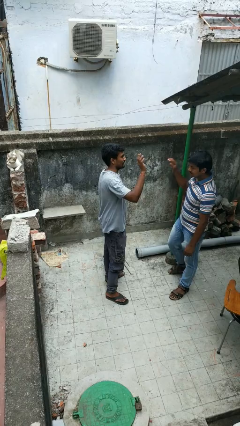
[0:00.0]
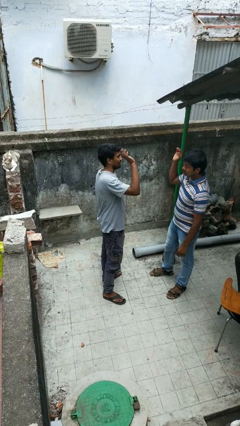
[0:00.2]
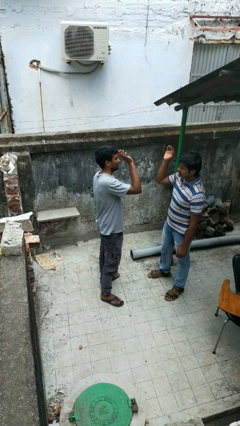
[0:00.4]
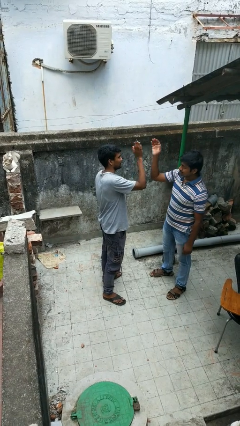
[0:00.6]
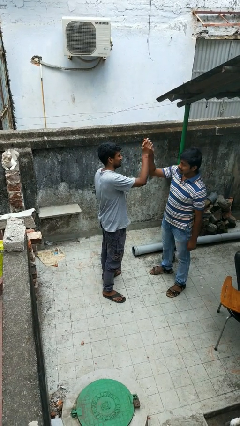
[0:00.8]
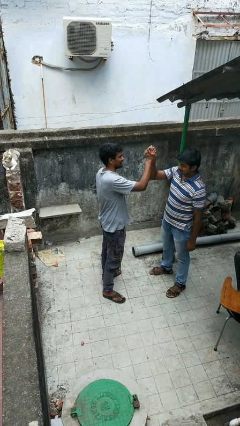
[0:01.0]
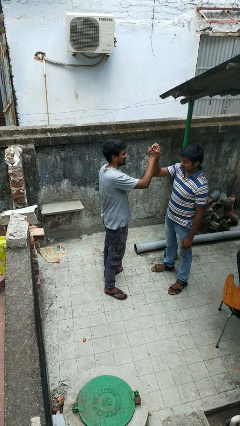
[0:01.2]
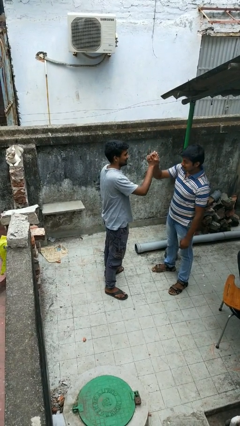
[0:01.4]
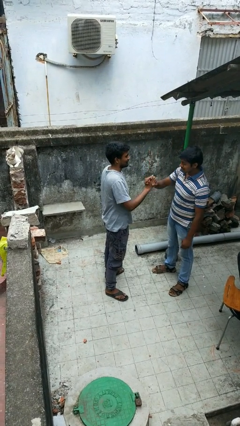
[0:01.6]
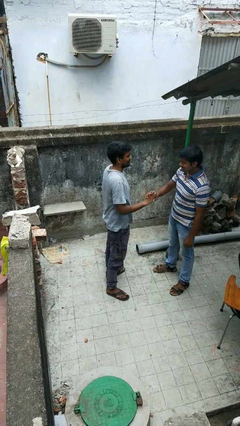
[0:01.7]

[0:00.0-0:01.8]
person highfives hand

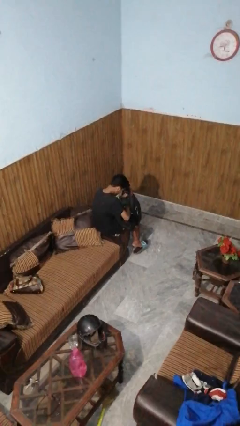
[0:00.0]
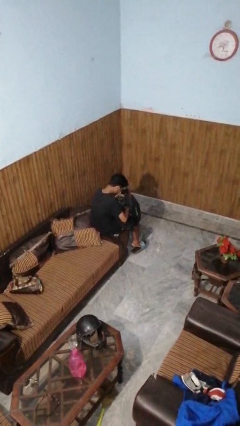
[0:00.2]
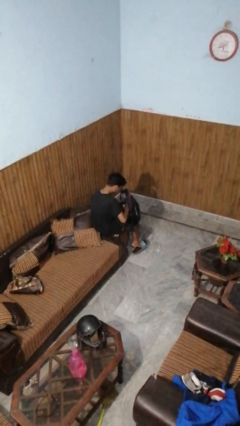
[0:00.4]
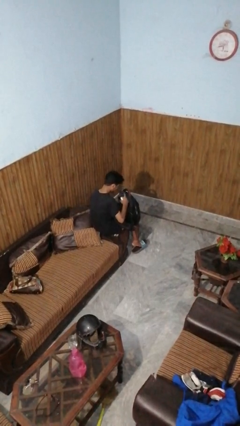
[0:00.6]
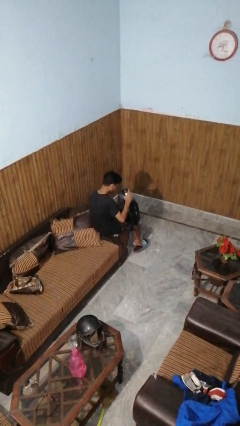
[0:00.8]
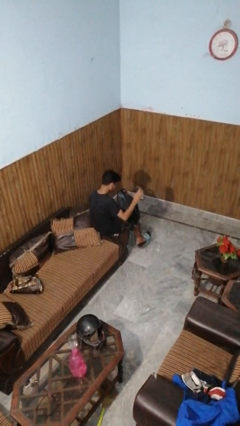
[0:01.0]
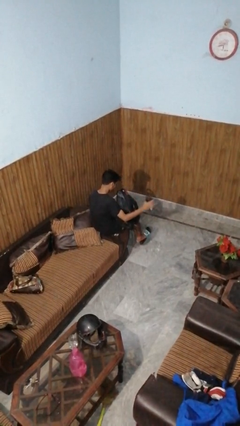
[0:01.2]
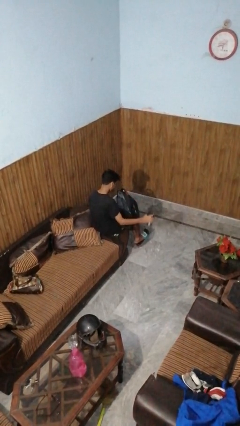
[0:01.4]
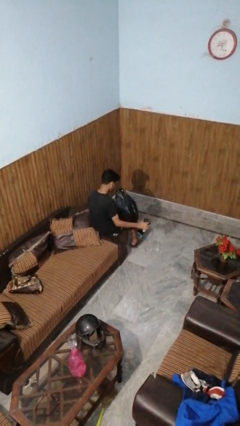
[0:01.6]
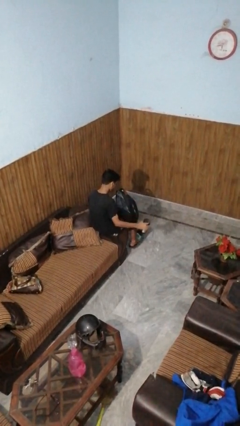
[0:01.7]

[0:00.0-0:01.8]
person takes object from backpack

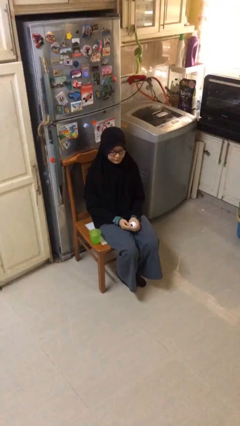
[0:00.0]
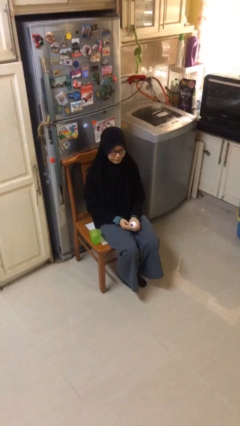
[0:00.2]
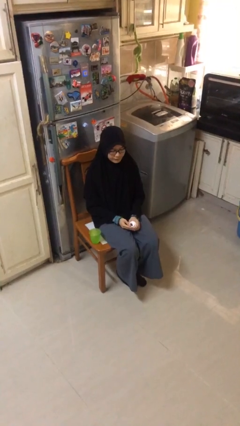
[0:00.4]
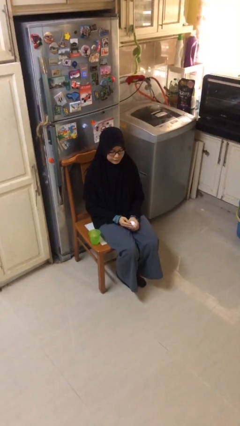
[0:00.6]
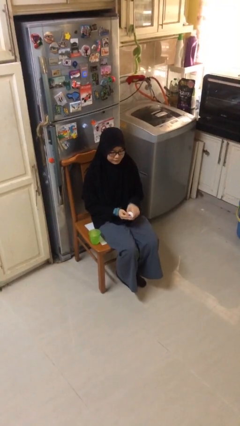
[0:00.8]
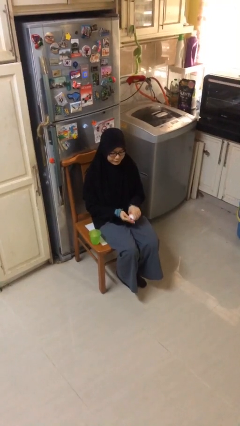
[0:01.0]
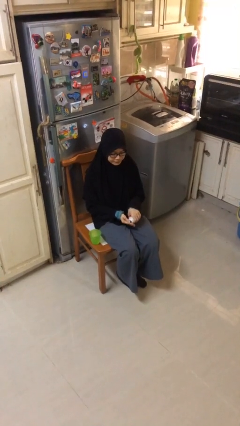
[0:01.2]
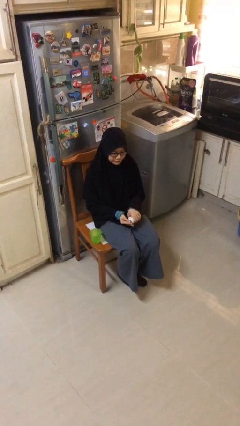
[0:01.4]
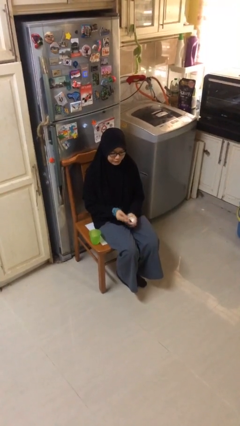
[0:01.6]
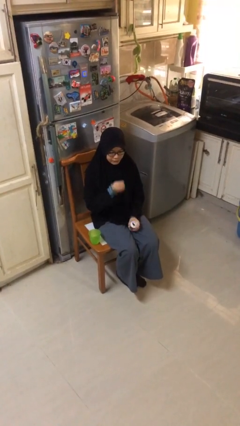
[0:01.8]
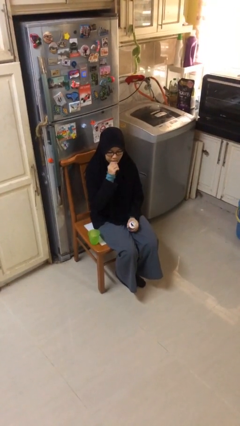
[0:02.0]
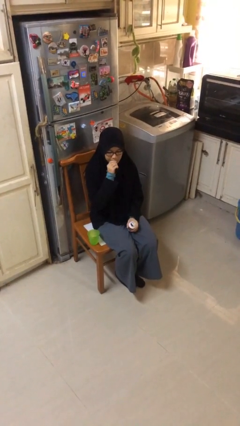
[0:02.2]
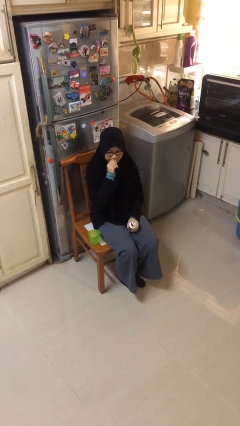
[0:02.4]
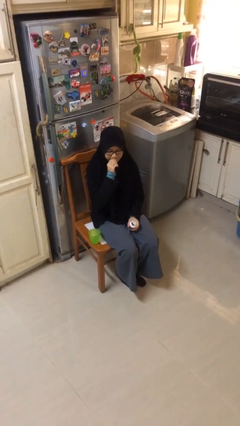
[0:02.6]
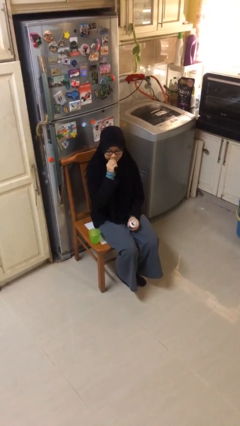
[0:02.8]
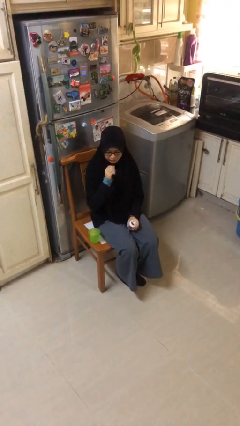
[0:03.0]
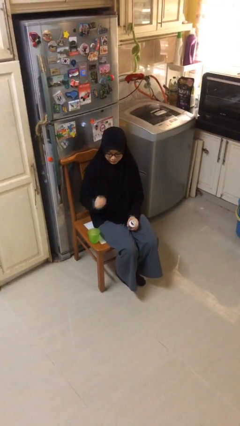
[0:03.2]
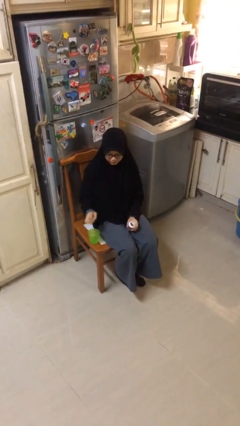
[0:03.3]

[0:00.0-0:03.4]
person takes medicine pills

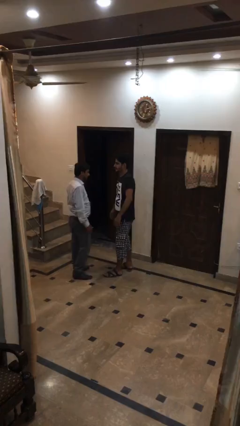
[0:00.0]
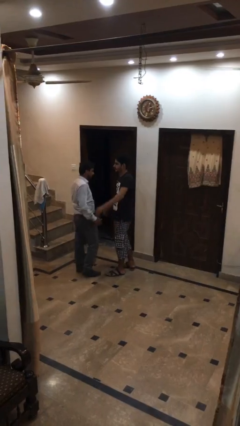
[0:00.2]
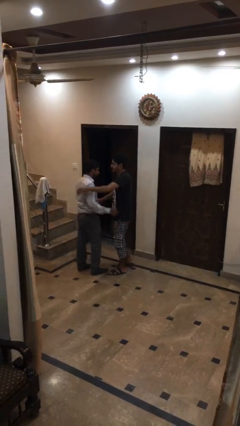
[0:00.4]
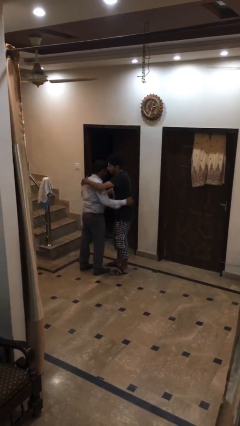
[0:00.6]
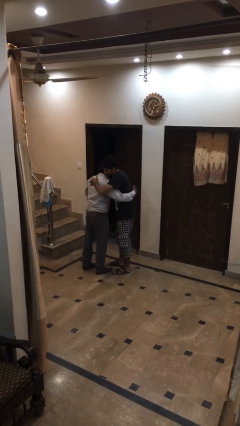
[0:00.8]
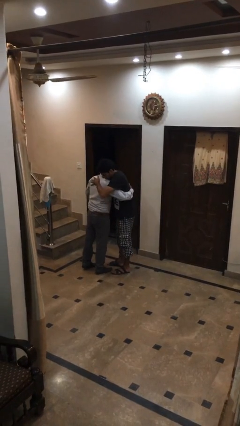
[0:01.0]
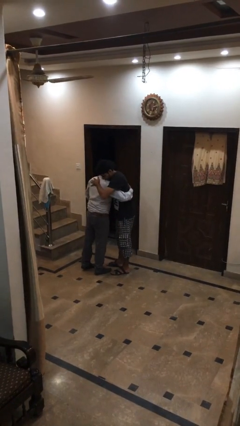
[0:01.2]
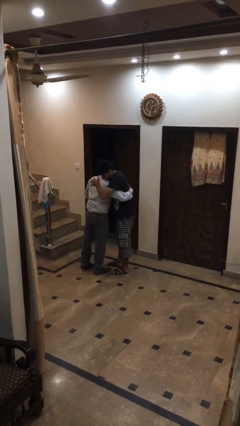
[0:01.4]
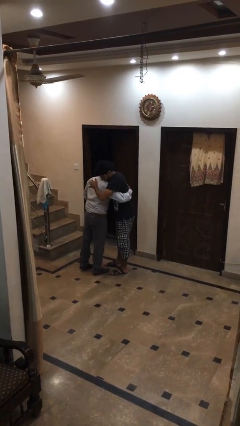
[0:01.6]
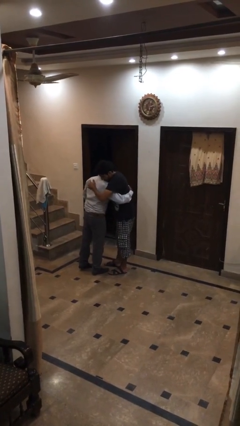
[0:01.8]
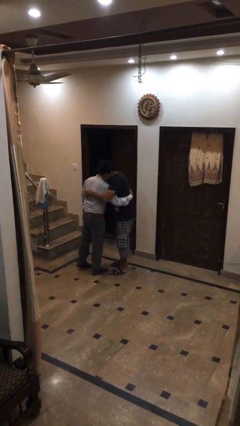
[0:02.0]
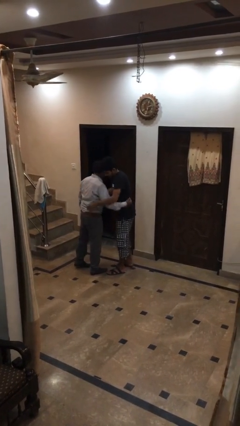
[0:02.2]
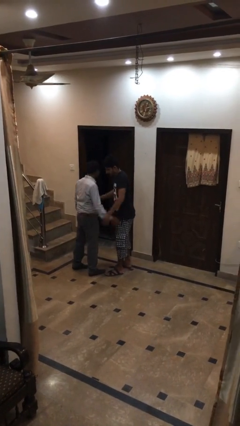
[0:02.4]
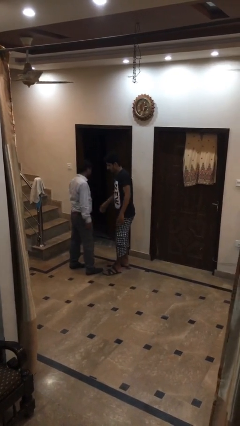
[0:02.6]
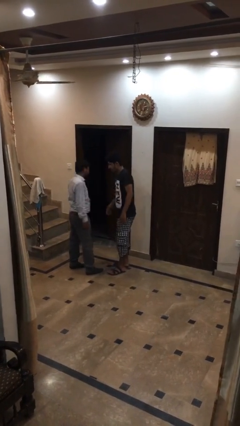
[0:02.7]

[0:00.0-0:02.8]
person embraces person

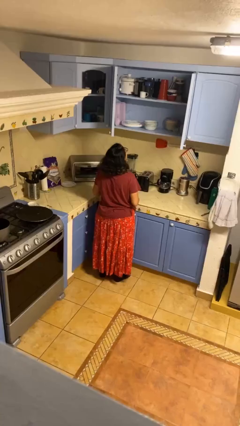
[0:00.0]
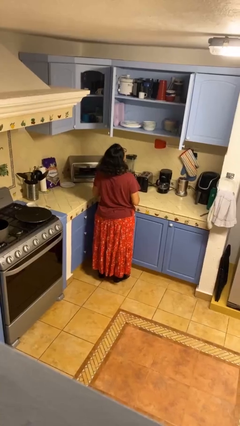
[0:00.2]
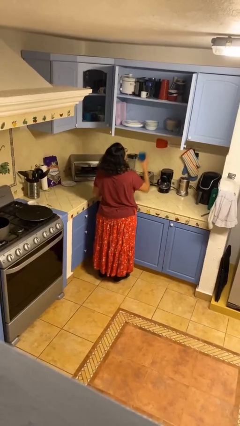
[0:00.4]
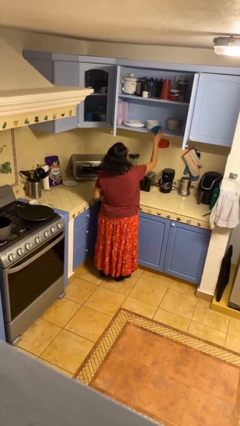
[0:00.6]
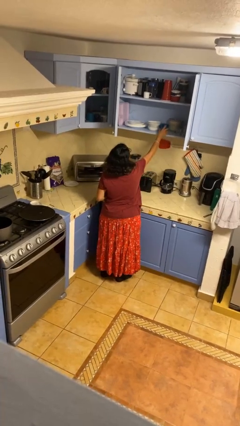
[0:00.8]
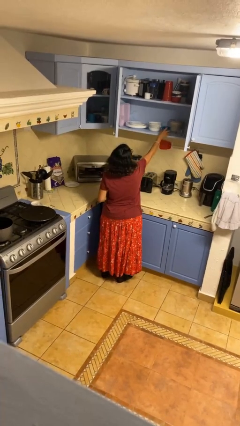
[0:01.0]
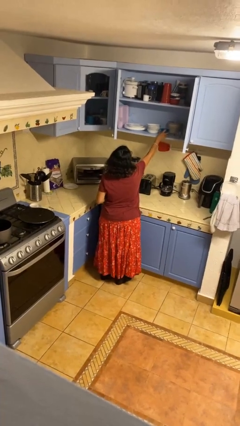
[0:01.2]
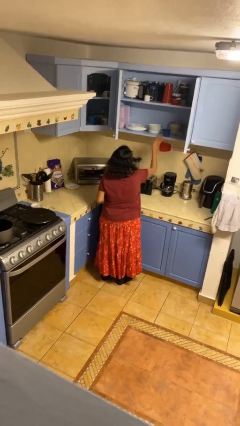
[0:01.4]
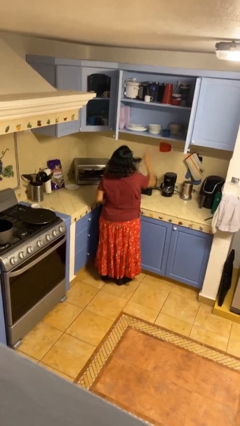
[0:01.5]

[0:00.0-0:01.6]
person puts down object into cabinet

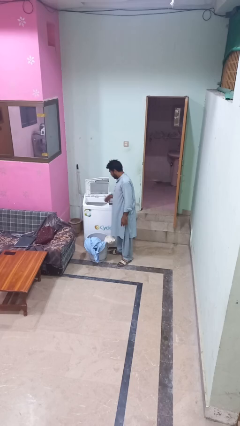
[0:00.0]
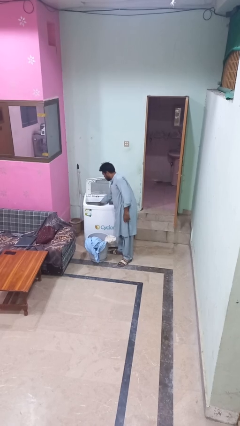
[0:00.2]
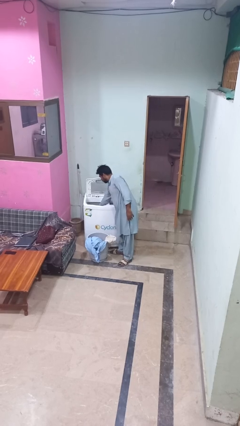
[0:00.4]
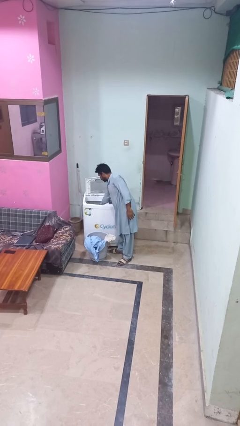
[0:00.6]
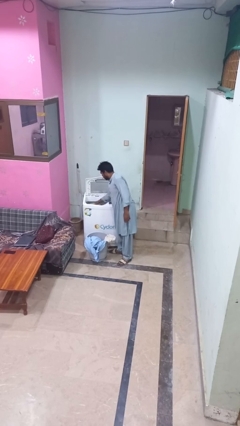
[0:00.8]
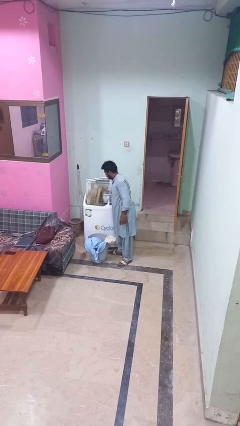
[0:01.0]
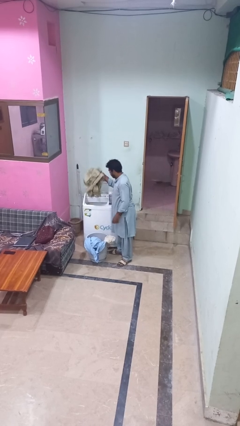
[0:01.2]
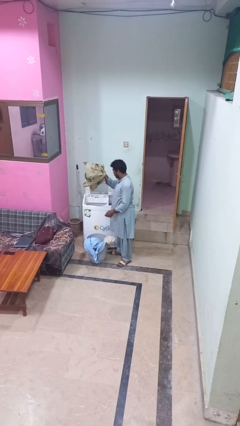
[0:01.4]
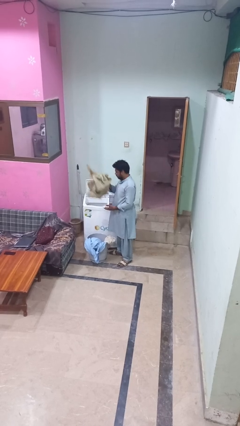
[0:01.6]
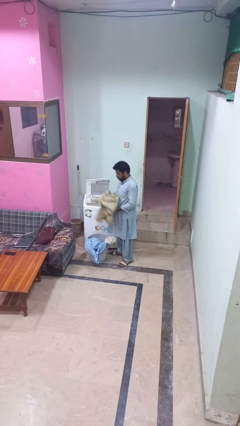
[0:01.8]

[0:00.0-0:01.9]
person unloads clotheswasher

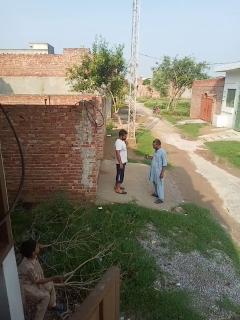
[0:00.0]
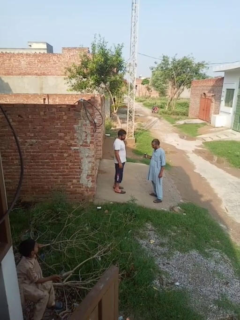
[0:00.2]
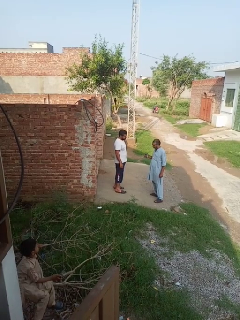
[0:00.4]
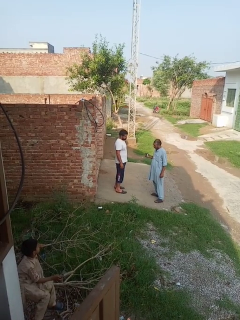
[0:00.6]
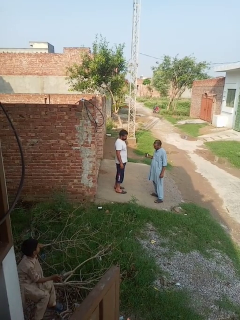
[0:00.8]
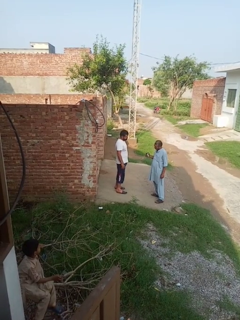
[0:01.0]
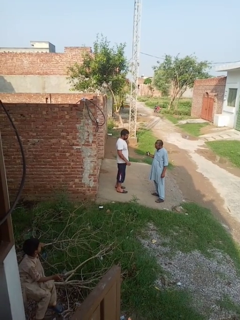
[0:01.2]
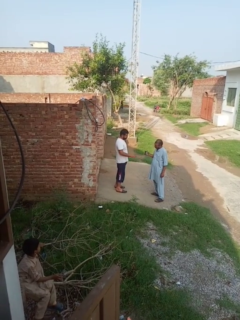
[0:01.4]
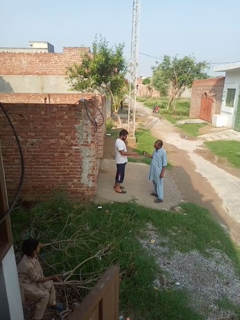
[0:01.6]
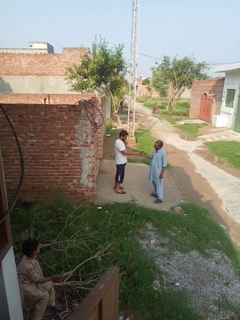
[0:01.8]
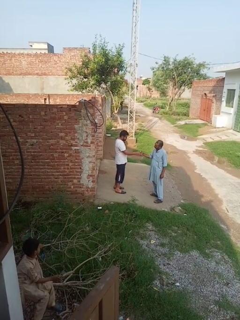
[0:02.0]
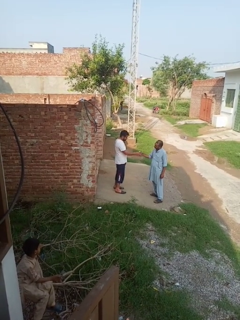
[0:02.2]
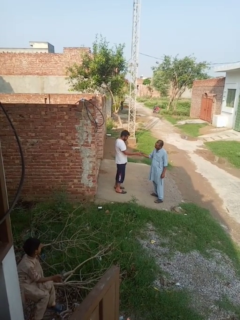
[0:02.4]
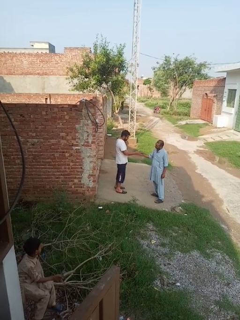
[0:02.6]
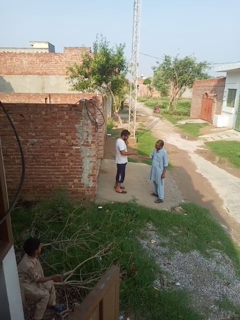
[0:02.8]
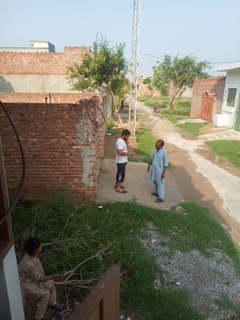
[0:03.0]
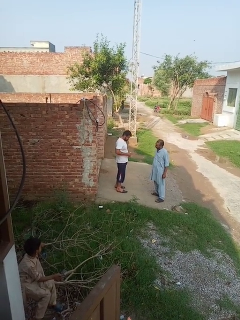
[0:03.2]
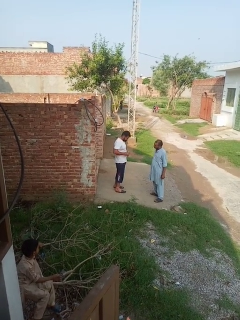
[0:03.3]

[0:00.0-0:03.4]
person transfers object to person

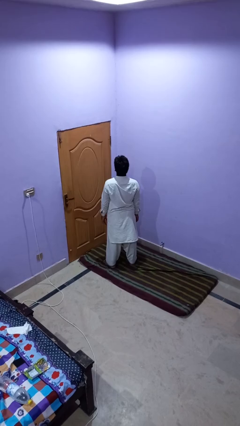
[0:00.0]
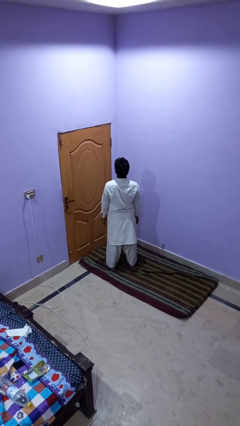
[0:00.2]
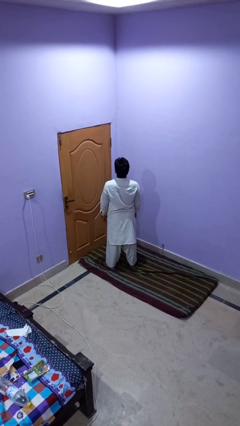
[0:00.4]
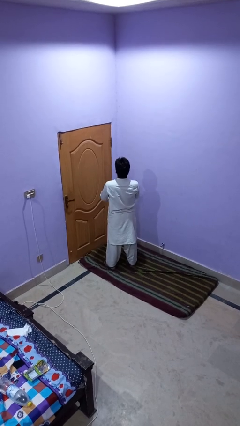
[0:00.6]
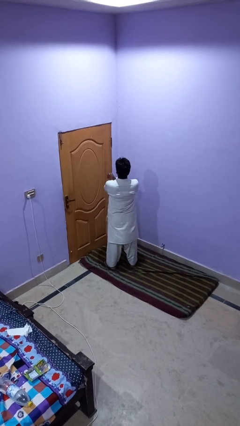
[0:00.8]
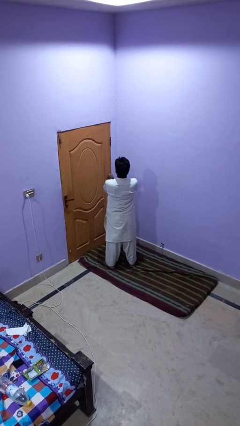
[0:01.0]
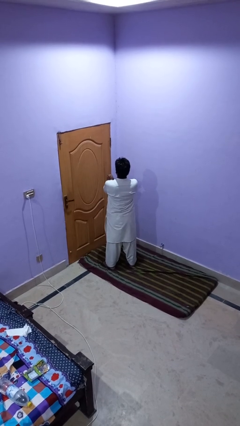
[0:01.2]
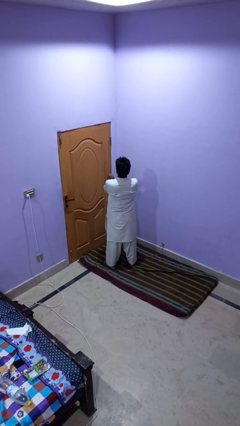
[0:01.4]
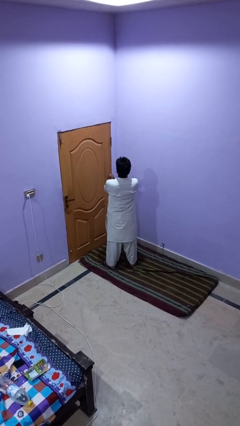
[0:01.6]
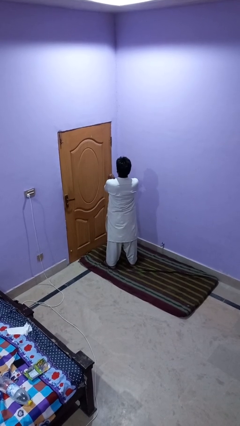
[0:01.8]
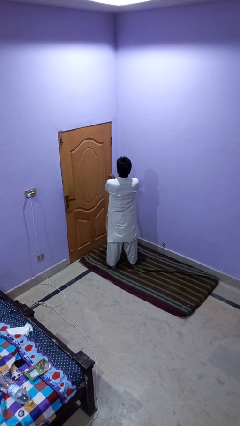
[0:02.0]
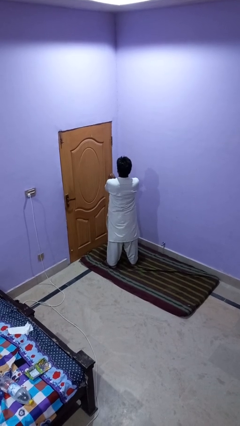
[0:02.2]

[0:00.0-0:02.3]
person crosses arms
